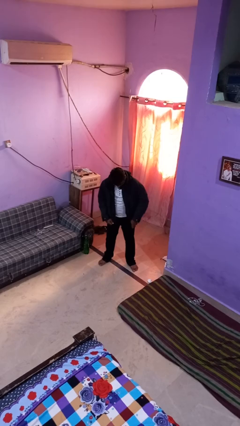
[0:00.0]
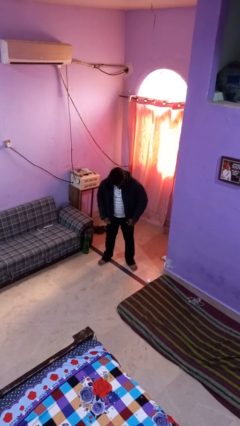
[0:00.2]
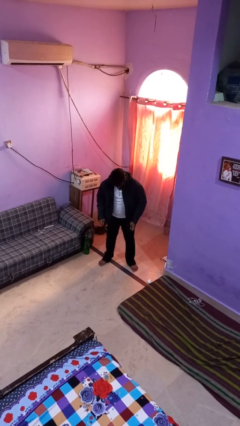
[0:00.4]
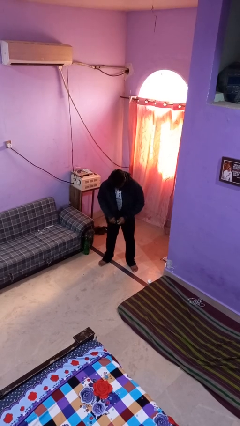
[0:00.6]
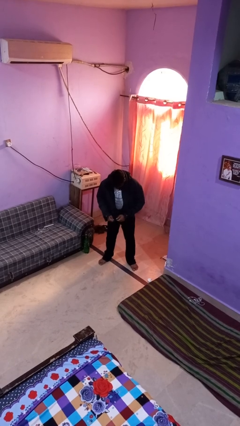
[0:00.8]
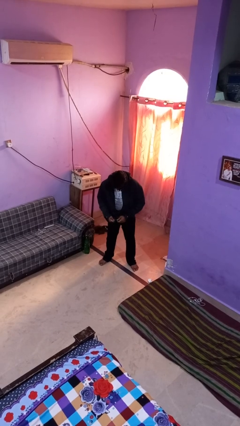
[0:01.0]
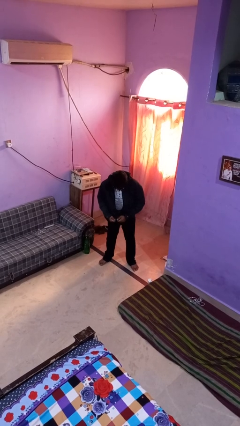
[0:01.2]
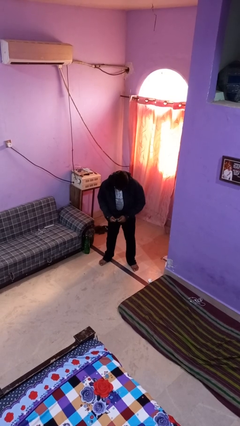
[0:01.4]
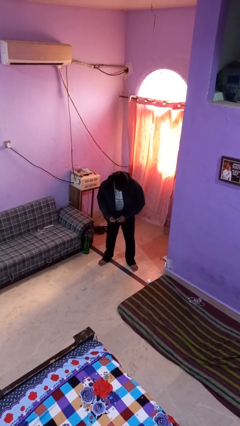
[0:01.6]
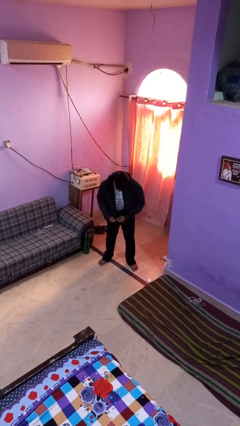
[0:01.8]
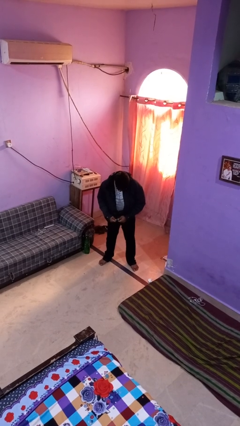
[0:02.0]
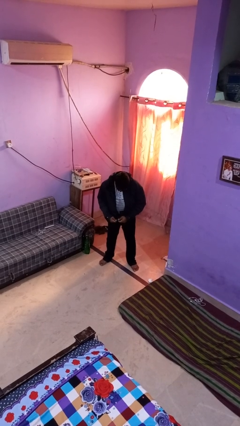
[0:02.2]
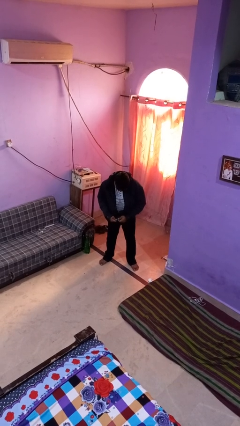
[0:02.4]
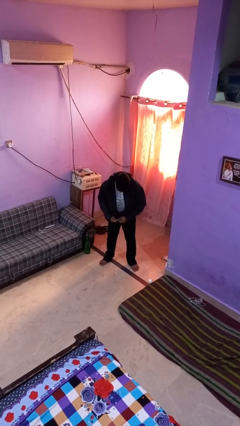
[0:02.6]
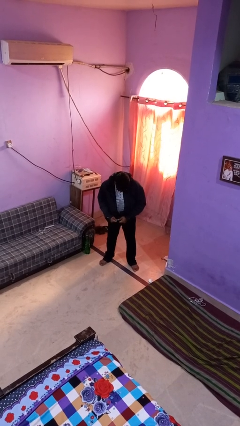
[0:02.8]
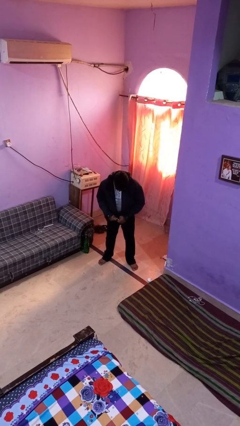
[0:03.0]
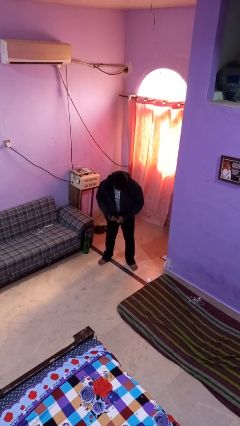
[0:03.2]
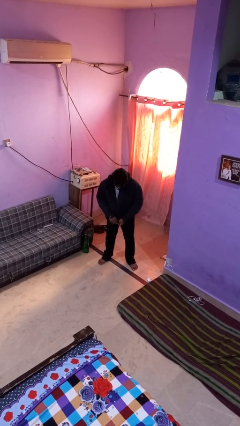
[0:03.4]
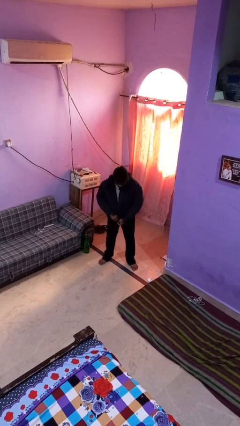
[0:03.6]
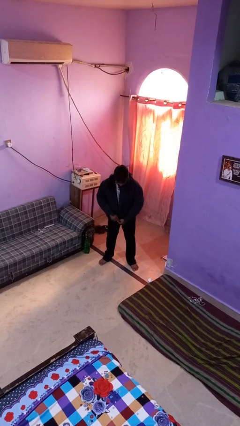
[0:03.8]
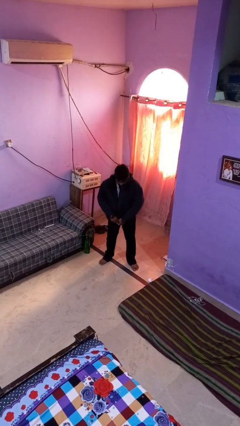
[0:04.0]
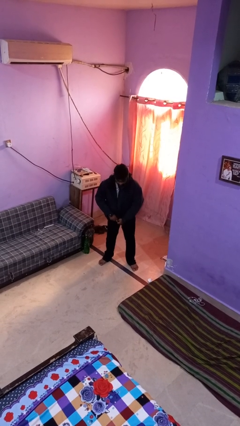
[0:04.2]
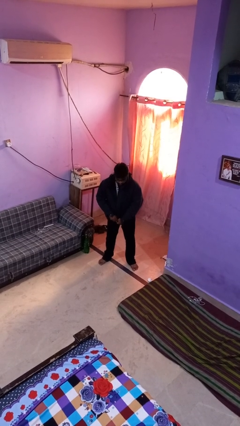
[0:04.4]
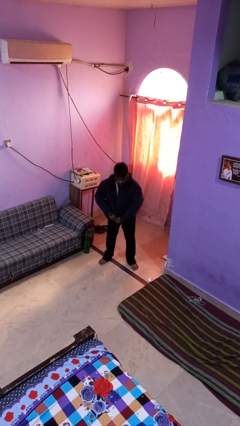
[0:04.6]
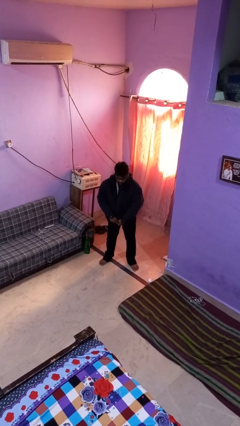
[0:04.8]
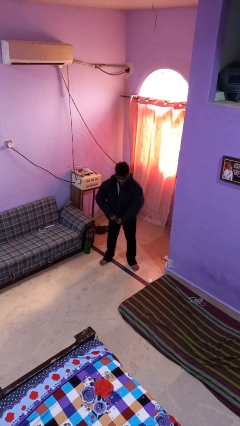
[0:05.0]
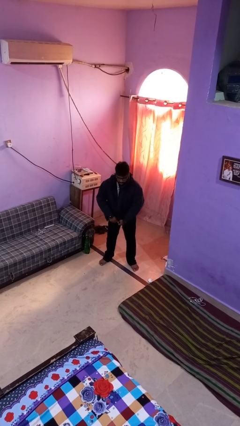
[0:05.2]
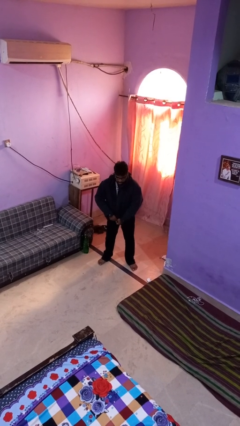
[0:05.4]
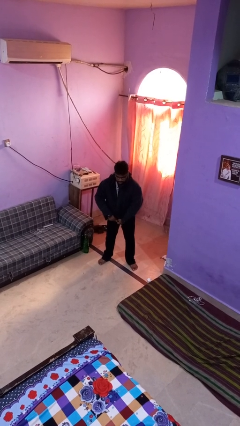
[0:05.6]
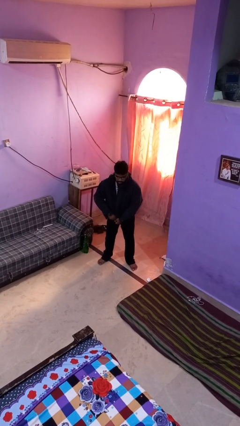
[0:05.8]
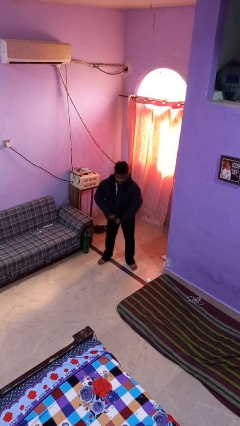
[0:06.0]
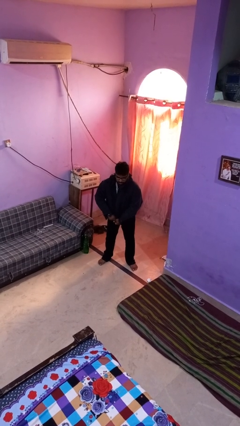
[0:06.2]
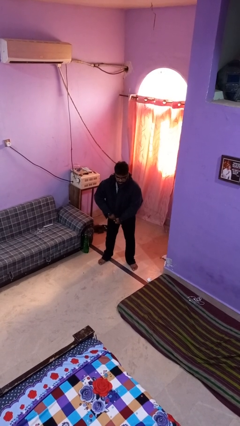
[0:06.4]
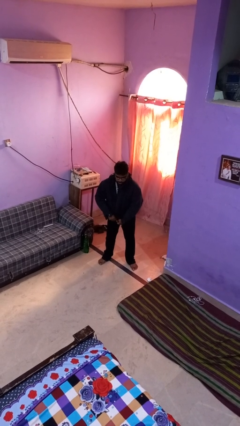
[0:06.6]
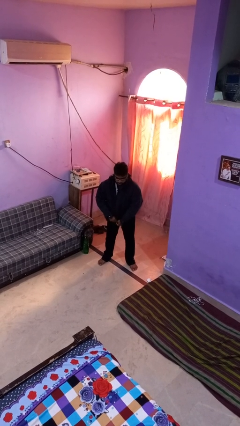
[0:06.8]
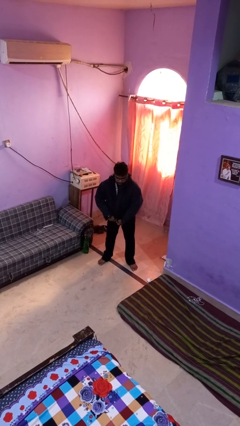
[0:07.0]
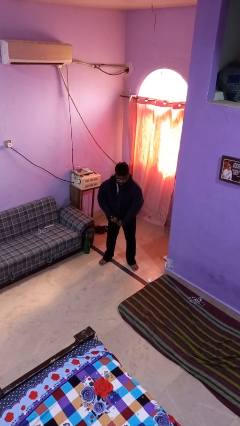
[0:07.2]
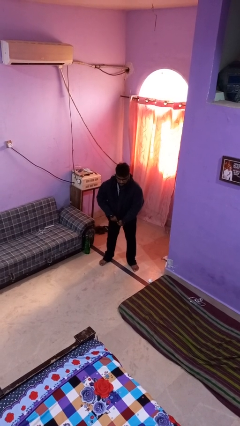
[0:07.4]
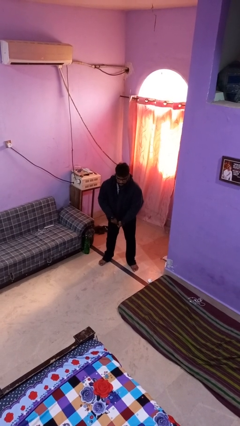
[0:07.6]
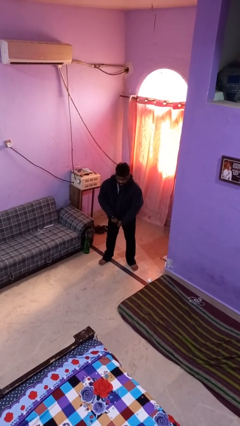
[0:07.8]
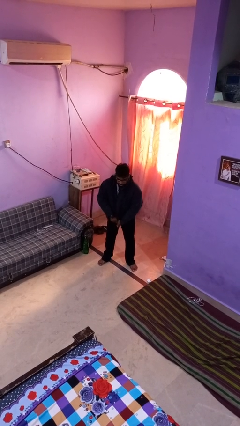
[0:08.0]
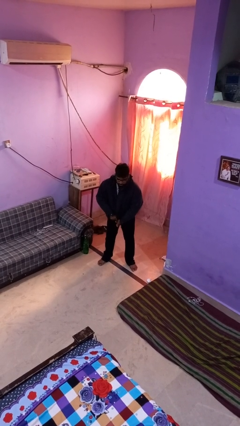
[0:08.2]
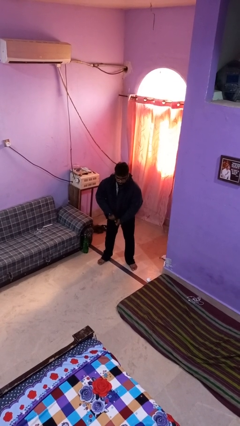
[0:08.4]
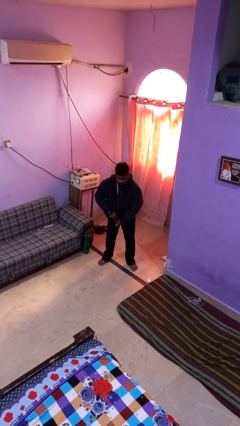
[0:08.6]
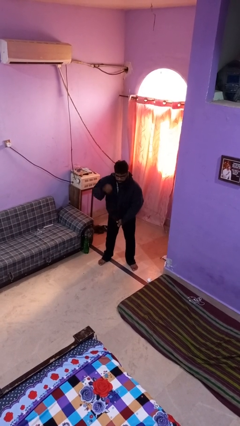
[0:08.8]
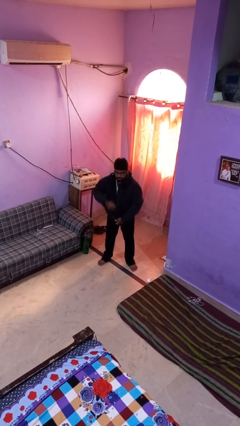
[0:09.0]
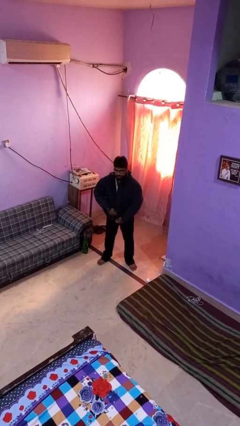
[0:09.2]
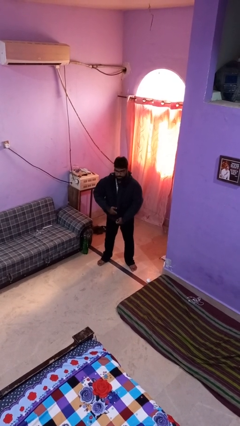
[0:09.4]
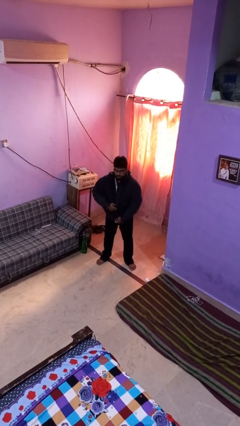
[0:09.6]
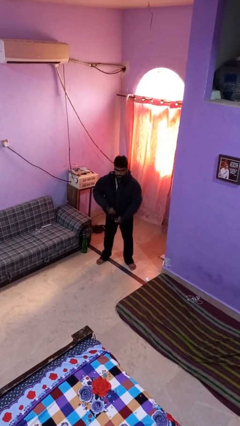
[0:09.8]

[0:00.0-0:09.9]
person zips up jacket

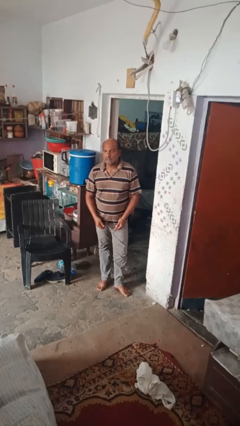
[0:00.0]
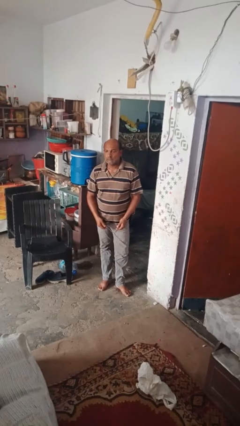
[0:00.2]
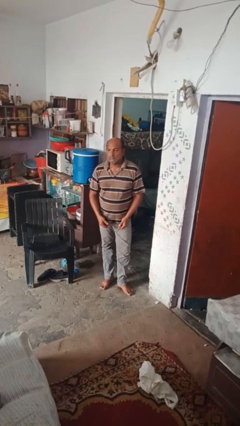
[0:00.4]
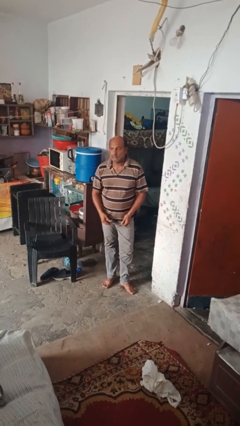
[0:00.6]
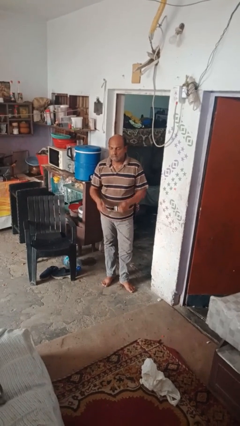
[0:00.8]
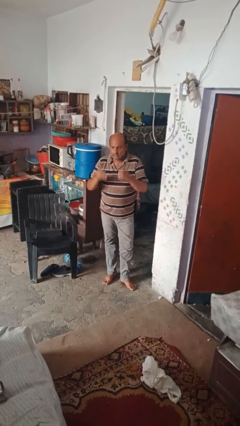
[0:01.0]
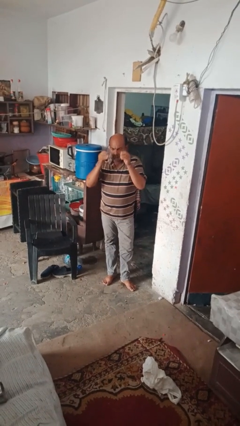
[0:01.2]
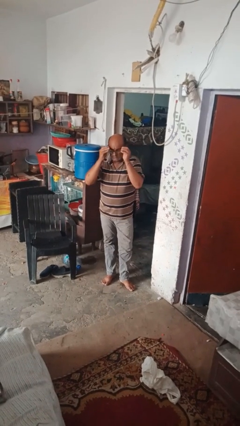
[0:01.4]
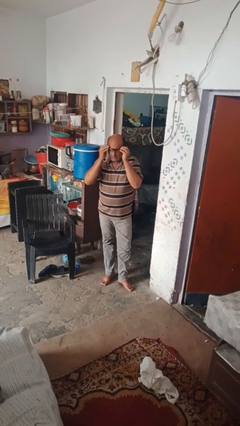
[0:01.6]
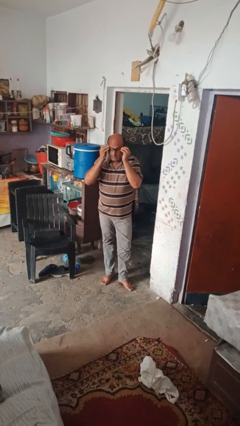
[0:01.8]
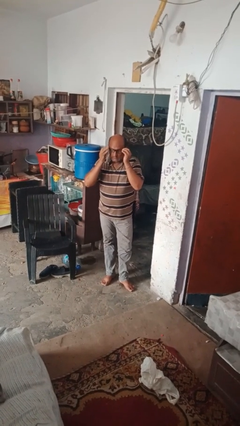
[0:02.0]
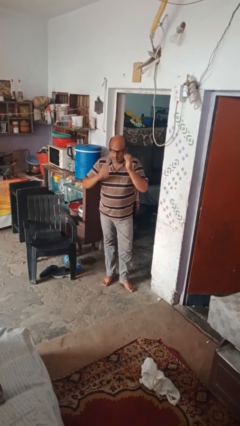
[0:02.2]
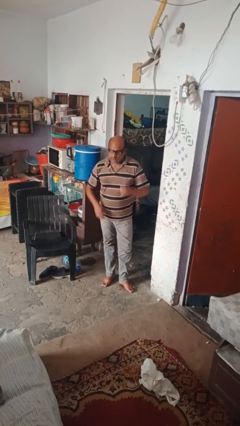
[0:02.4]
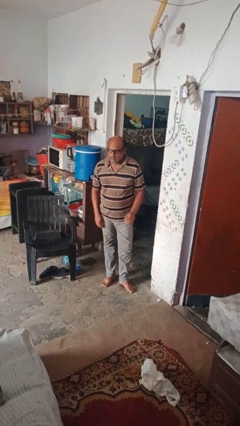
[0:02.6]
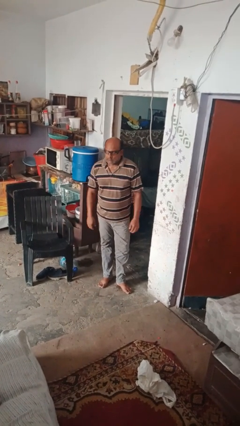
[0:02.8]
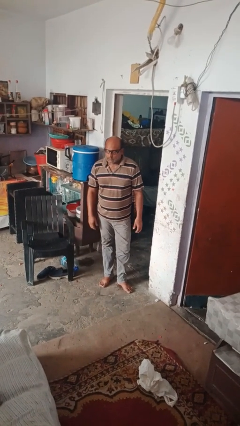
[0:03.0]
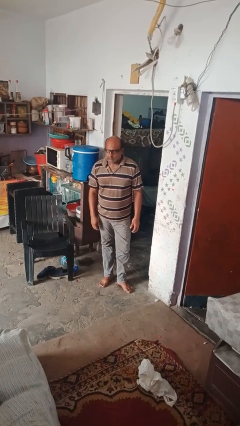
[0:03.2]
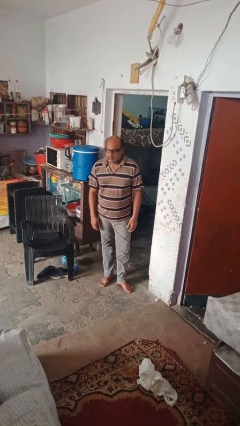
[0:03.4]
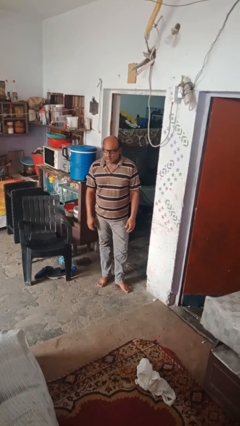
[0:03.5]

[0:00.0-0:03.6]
person puts on glasses

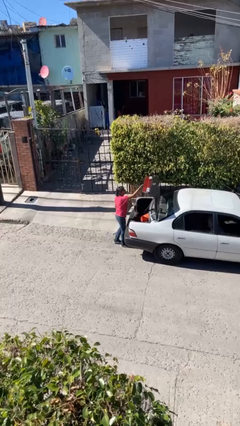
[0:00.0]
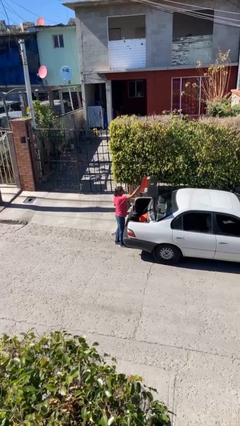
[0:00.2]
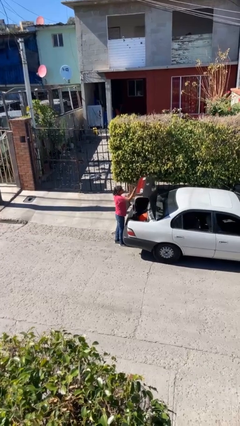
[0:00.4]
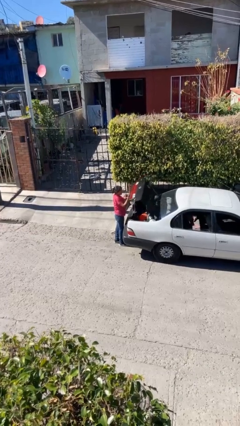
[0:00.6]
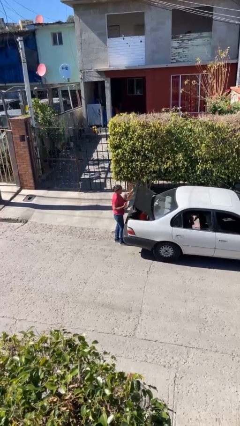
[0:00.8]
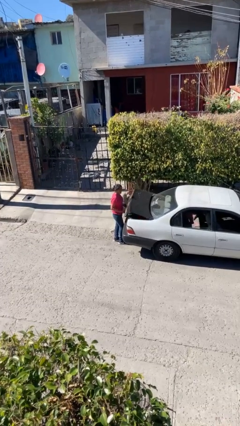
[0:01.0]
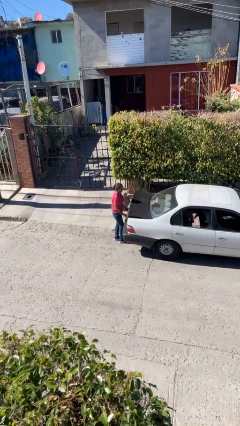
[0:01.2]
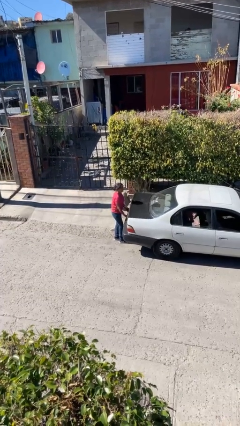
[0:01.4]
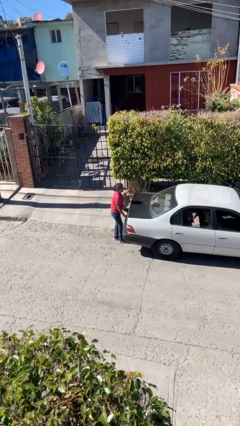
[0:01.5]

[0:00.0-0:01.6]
person closes car trunk

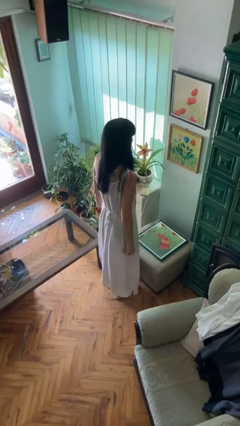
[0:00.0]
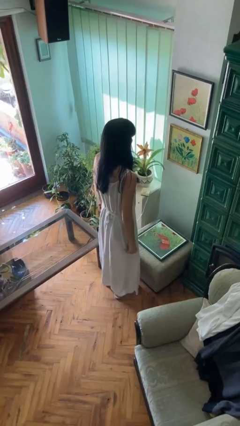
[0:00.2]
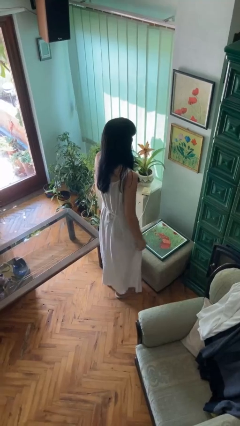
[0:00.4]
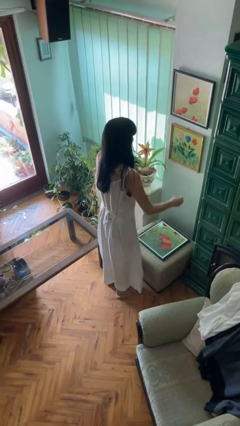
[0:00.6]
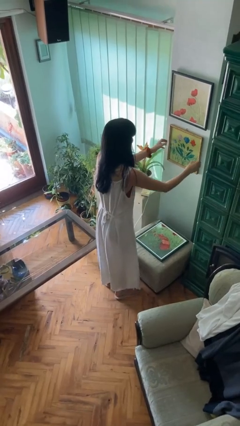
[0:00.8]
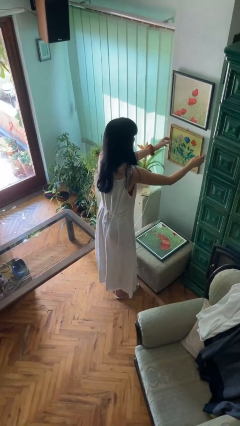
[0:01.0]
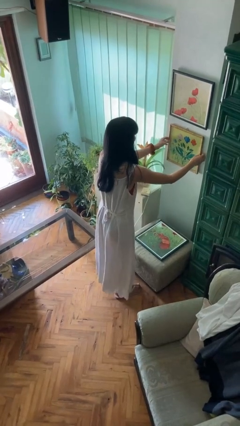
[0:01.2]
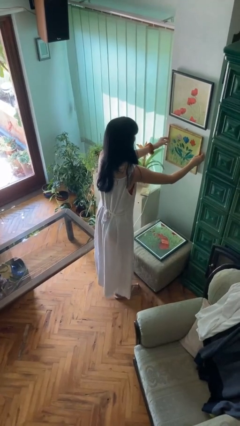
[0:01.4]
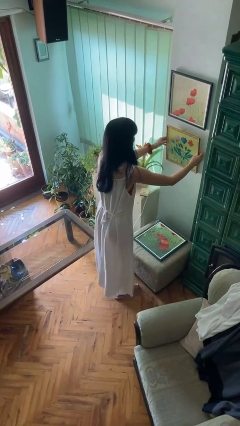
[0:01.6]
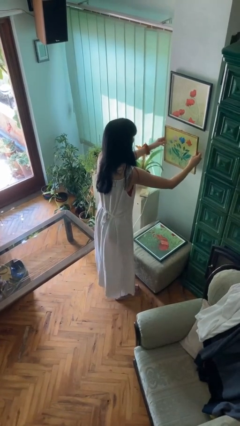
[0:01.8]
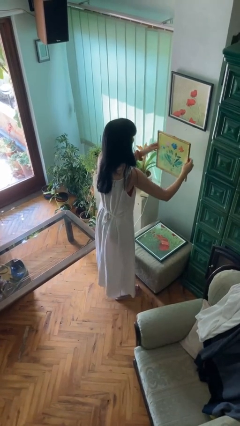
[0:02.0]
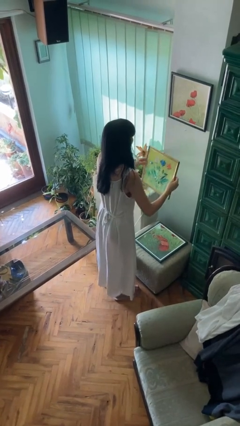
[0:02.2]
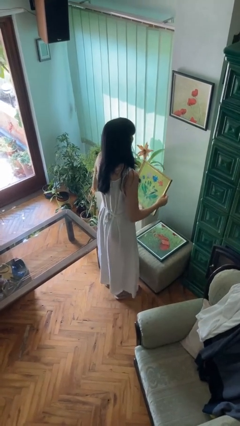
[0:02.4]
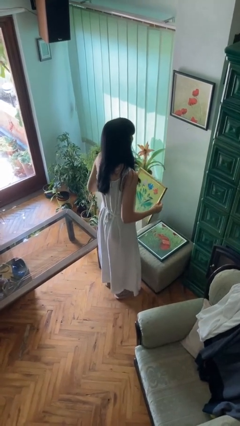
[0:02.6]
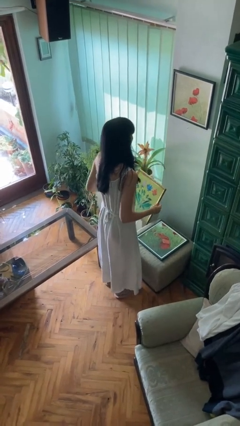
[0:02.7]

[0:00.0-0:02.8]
person takes down picture frame
